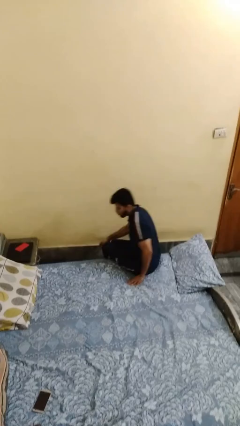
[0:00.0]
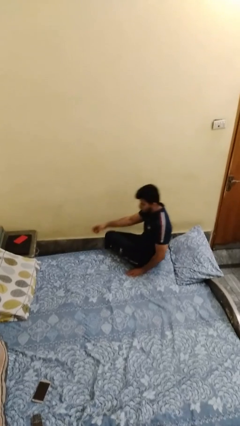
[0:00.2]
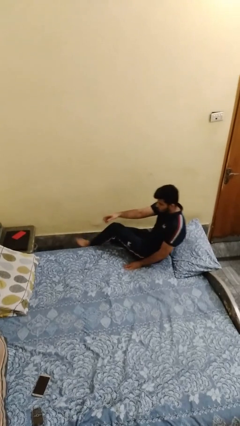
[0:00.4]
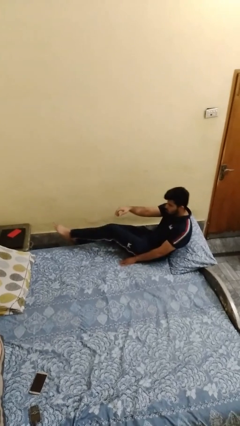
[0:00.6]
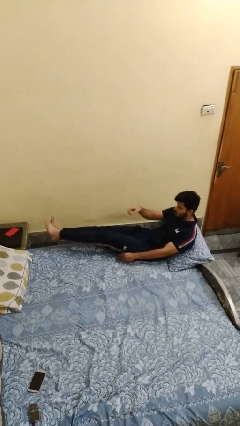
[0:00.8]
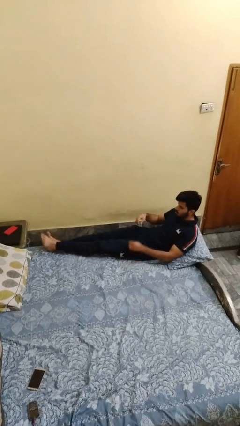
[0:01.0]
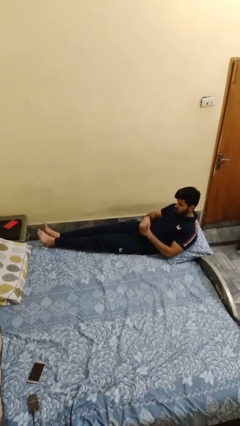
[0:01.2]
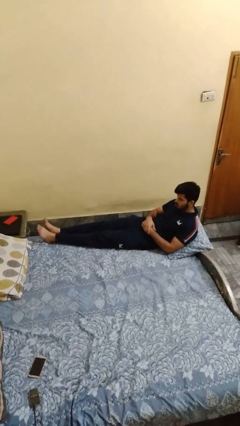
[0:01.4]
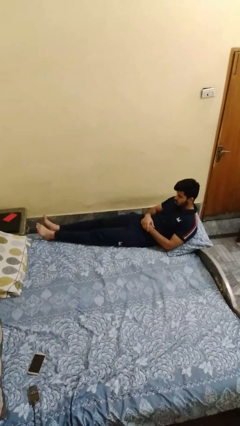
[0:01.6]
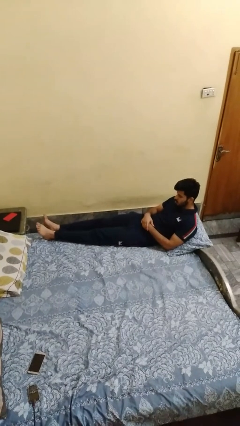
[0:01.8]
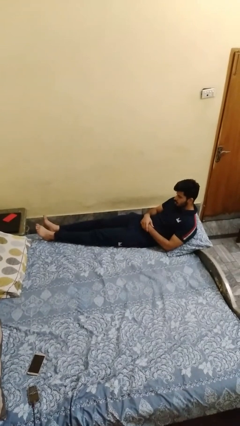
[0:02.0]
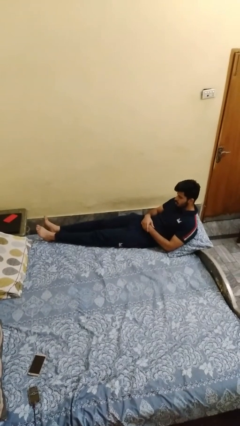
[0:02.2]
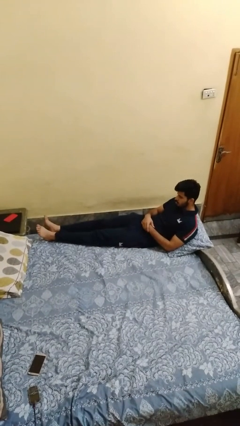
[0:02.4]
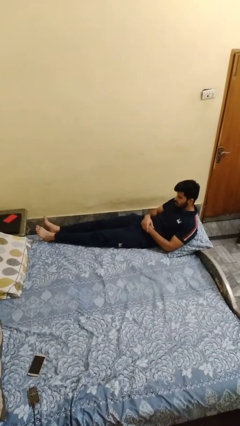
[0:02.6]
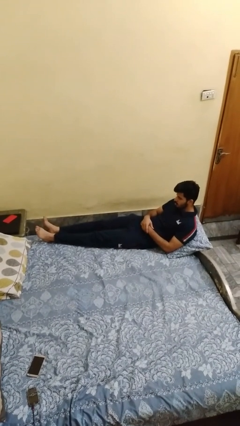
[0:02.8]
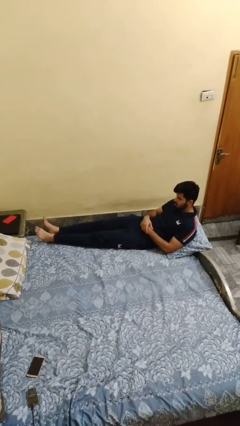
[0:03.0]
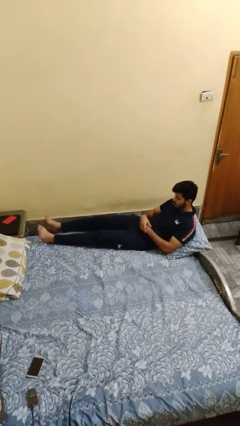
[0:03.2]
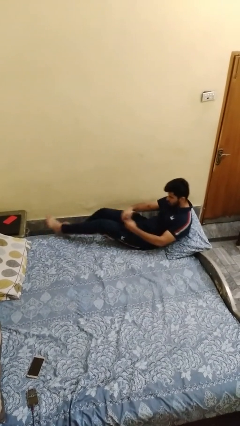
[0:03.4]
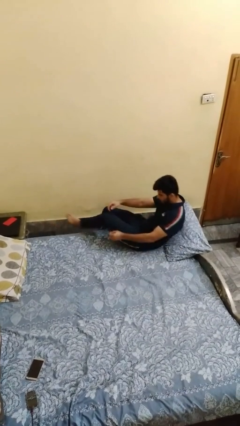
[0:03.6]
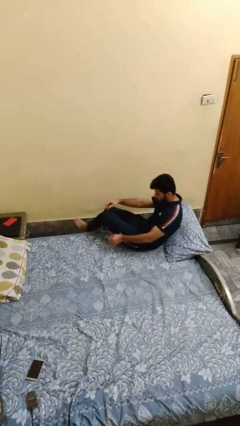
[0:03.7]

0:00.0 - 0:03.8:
person lies down on bed

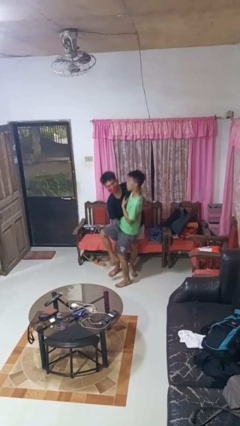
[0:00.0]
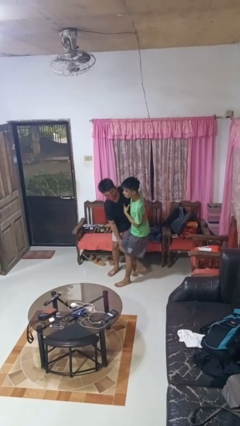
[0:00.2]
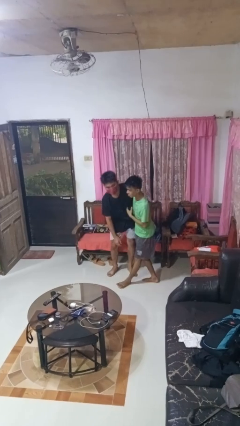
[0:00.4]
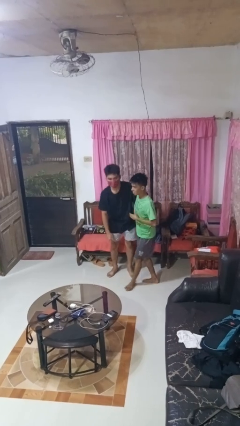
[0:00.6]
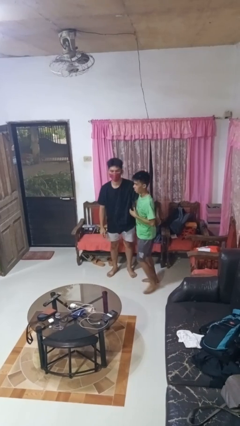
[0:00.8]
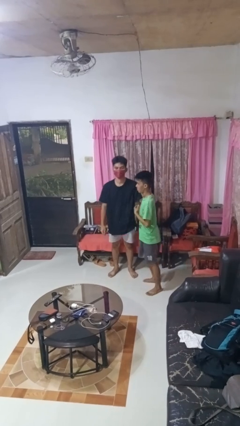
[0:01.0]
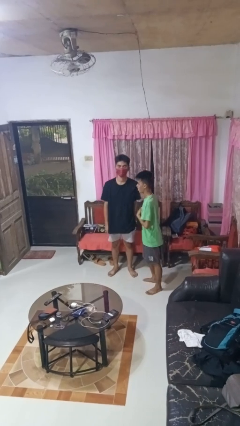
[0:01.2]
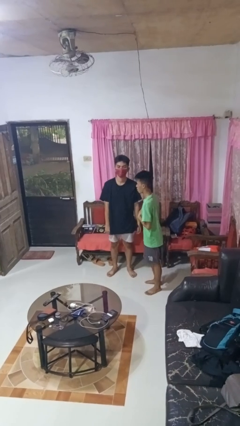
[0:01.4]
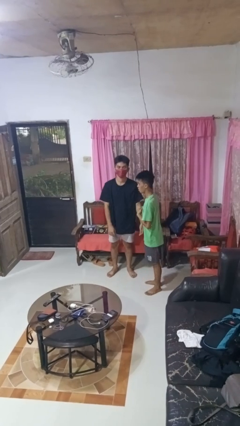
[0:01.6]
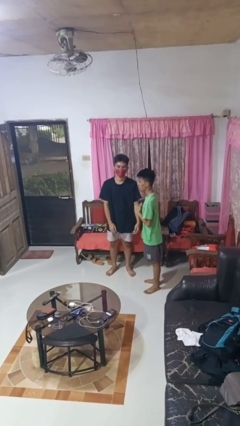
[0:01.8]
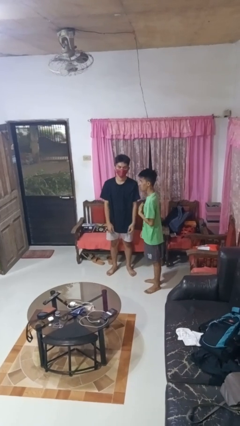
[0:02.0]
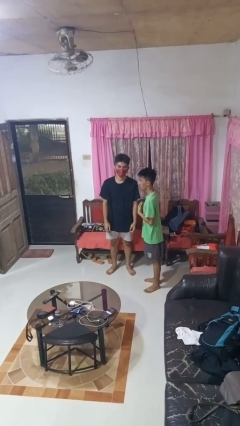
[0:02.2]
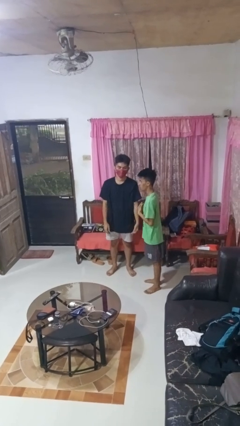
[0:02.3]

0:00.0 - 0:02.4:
person puts down person

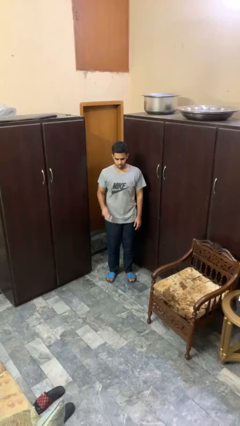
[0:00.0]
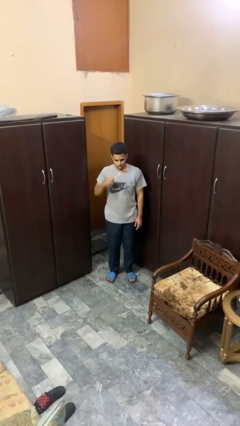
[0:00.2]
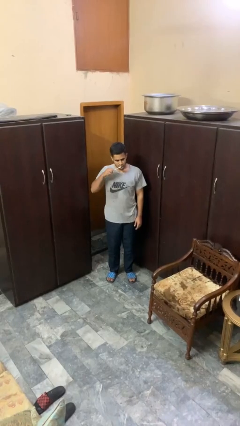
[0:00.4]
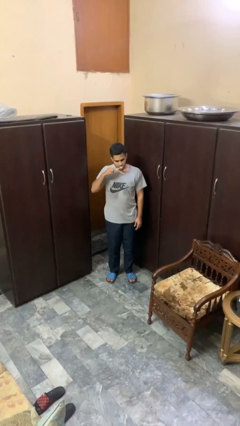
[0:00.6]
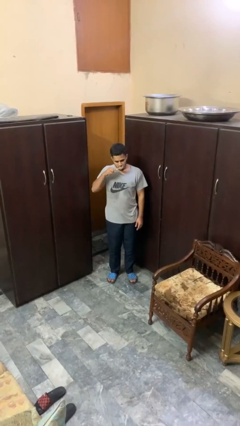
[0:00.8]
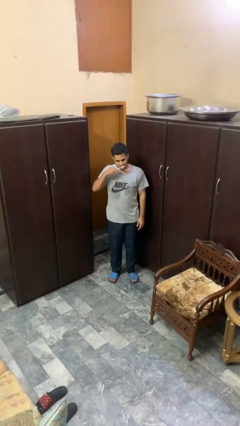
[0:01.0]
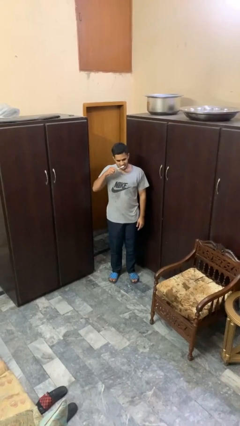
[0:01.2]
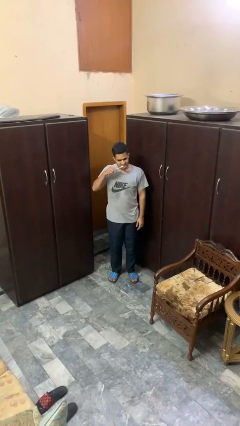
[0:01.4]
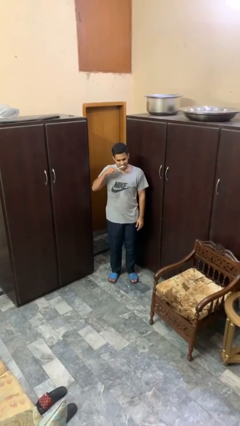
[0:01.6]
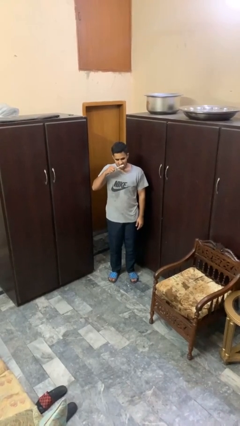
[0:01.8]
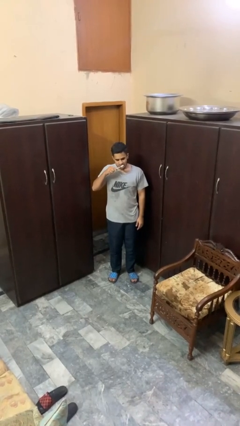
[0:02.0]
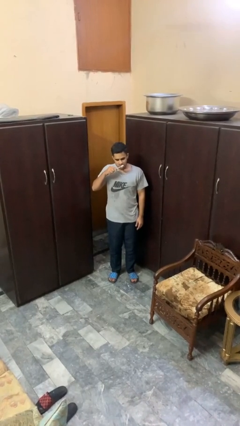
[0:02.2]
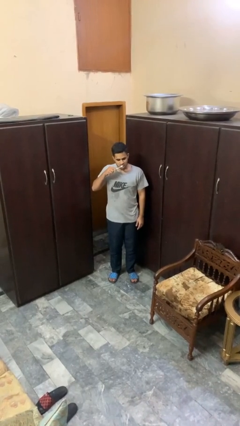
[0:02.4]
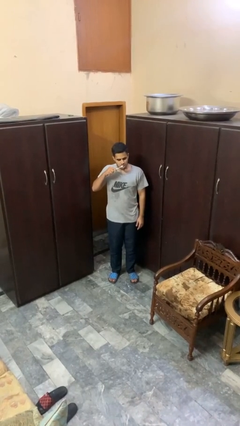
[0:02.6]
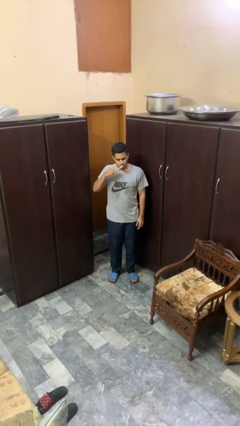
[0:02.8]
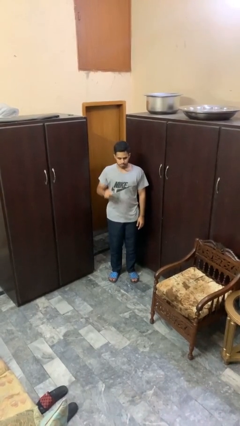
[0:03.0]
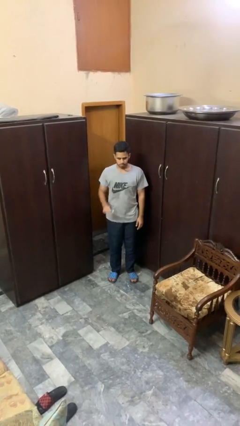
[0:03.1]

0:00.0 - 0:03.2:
person brushes teeth

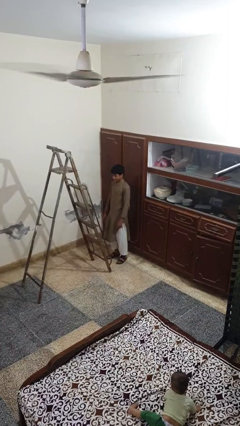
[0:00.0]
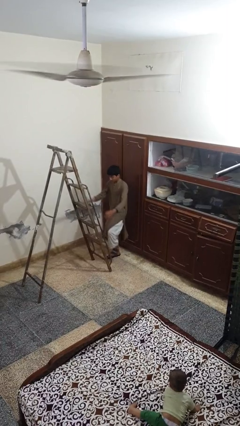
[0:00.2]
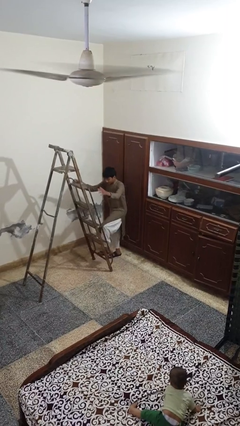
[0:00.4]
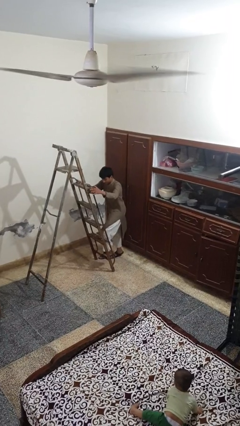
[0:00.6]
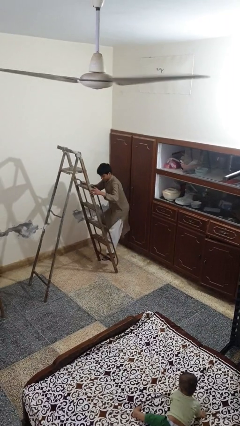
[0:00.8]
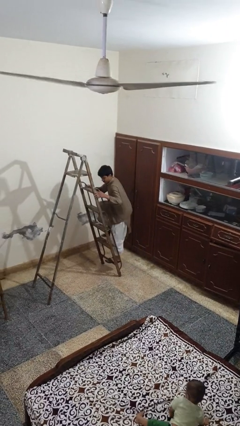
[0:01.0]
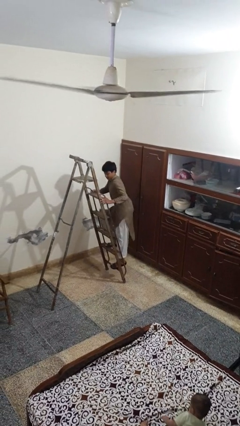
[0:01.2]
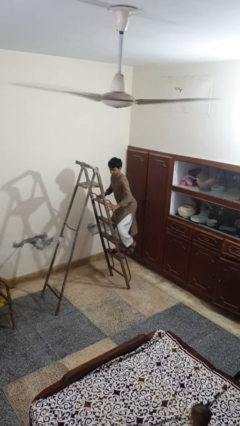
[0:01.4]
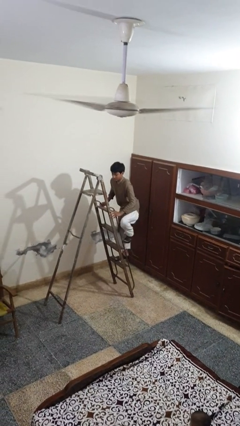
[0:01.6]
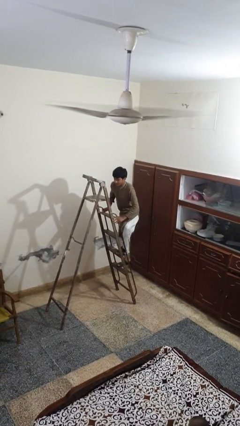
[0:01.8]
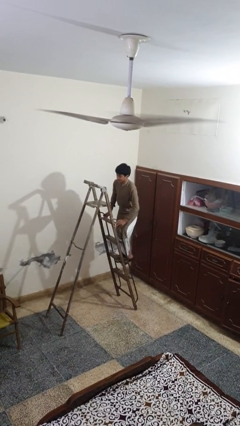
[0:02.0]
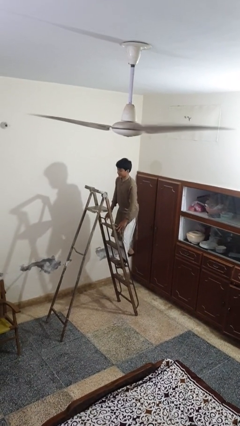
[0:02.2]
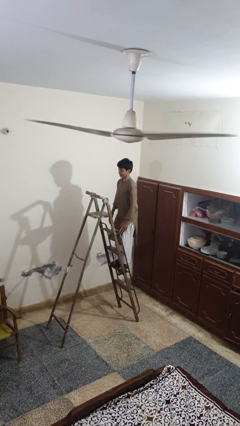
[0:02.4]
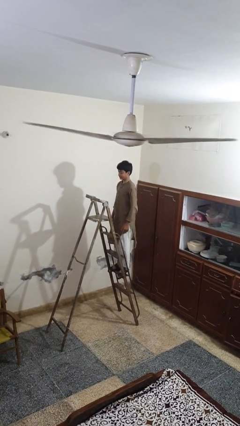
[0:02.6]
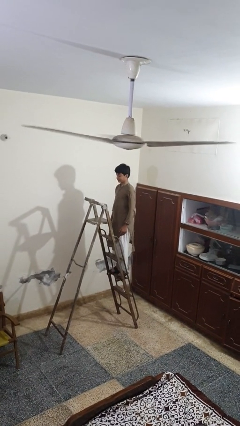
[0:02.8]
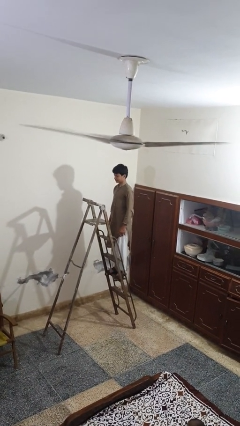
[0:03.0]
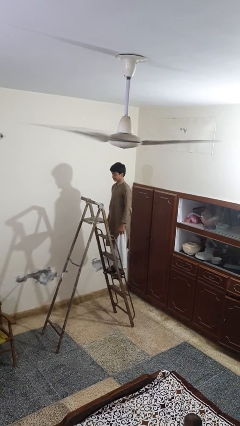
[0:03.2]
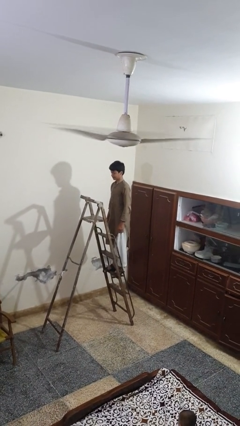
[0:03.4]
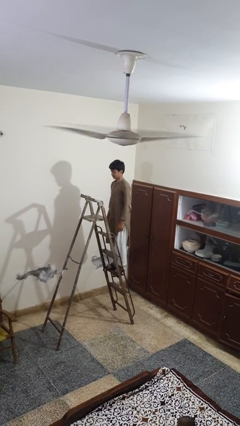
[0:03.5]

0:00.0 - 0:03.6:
person climbs up ladder

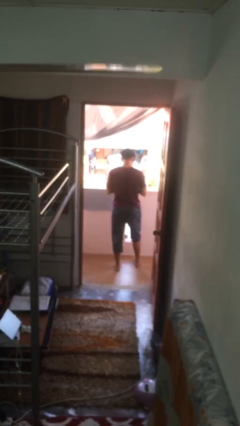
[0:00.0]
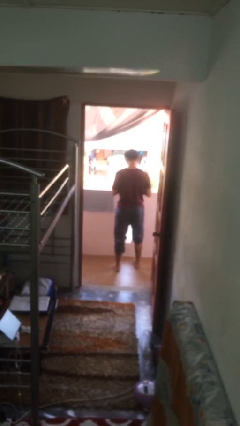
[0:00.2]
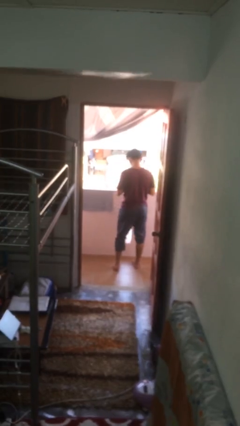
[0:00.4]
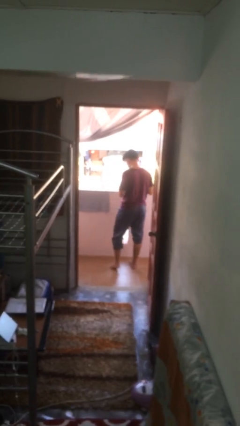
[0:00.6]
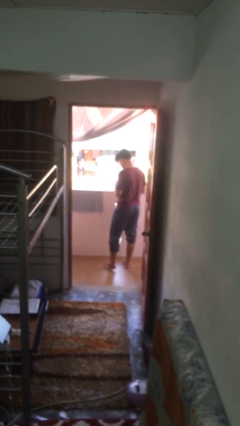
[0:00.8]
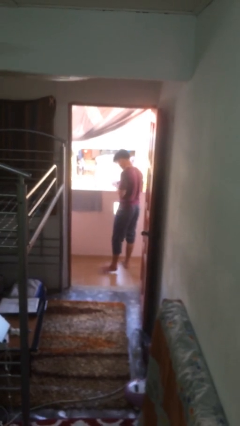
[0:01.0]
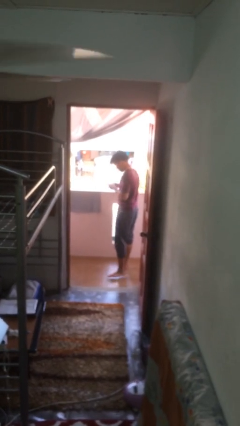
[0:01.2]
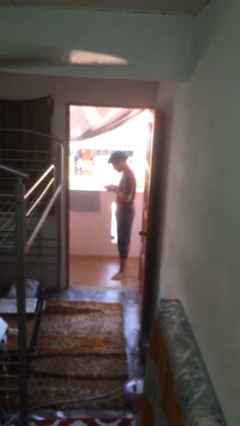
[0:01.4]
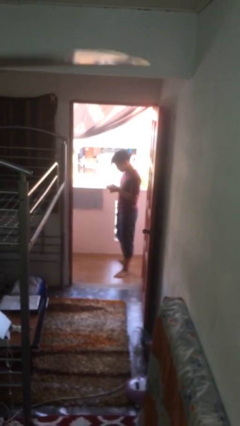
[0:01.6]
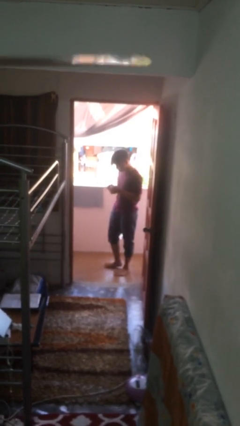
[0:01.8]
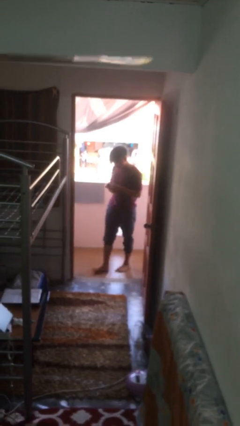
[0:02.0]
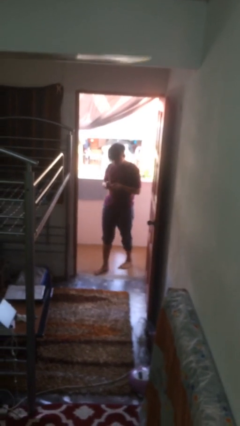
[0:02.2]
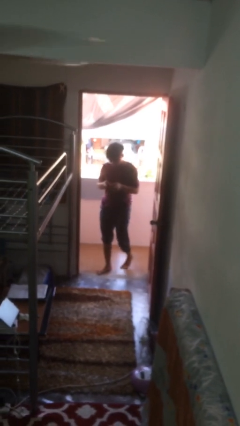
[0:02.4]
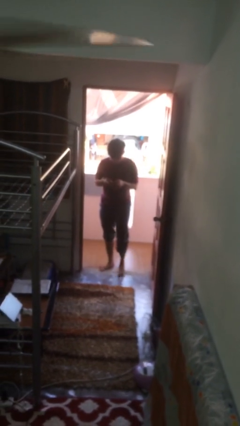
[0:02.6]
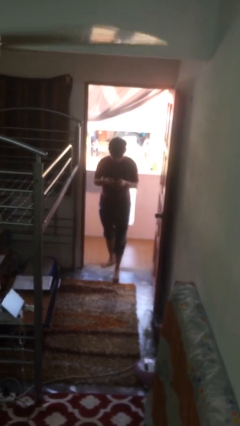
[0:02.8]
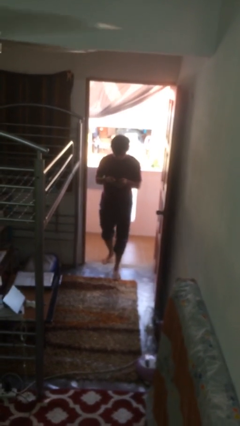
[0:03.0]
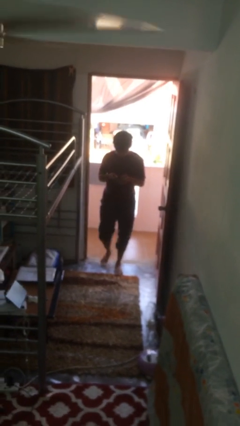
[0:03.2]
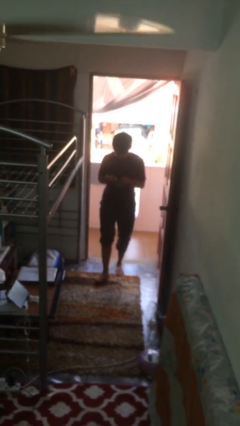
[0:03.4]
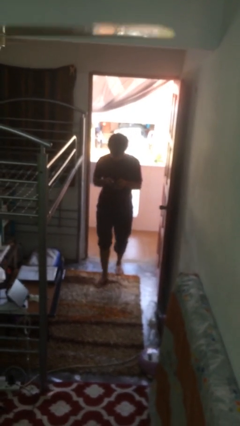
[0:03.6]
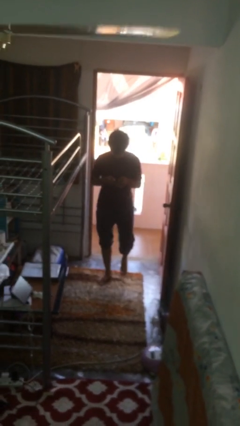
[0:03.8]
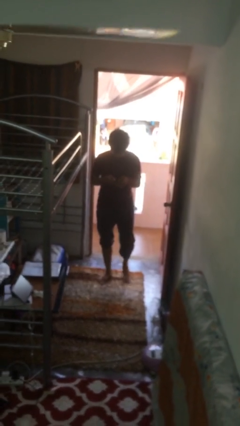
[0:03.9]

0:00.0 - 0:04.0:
person enters scene through structure

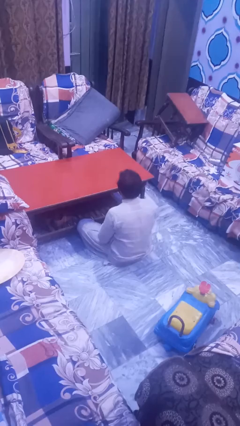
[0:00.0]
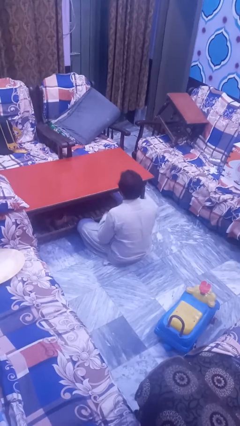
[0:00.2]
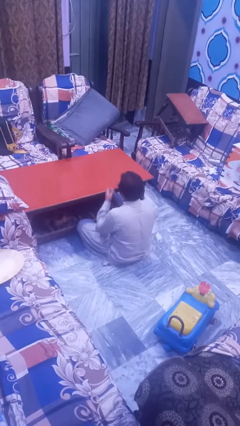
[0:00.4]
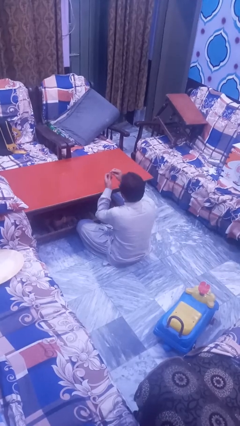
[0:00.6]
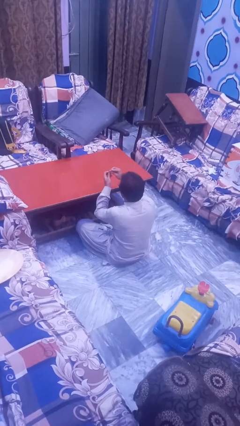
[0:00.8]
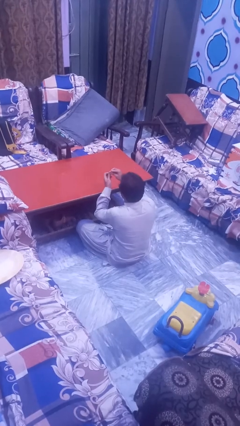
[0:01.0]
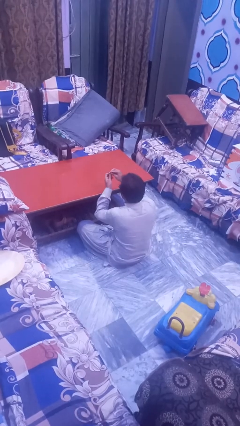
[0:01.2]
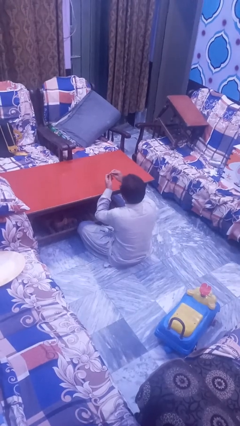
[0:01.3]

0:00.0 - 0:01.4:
person files fingernails
